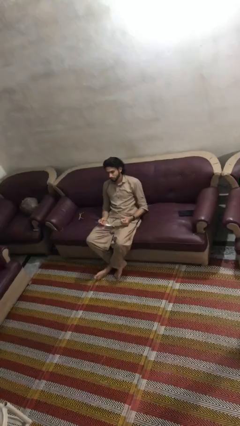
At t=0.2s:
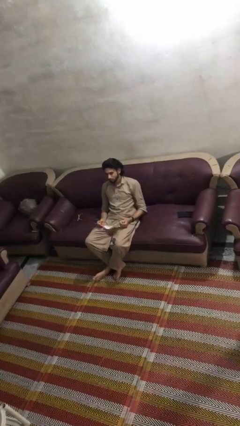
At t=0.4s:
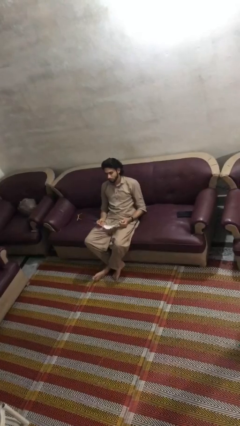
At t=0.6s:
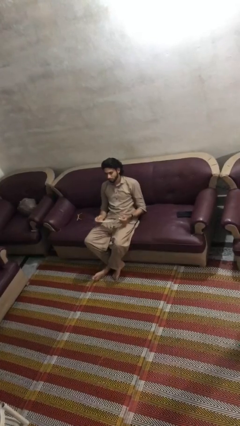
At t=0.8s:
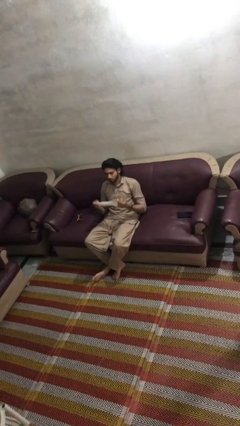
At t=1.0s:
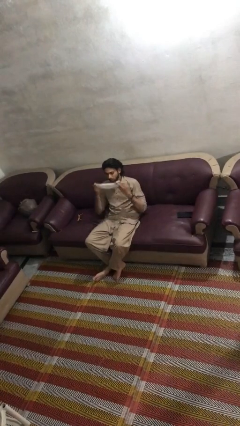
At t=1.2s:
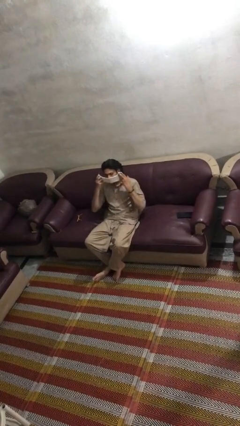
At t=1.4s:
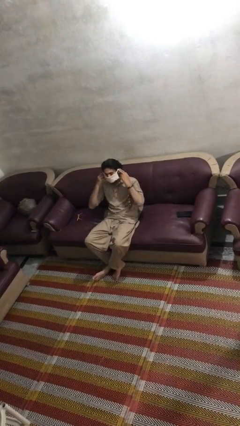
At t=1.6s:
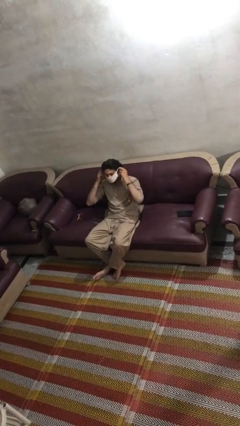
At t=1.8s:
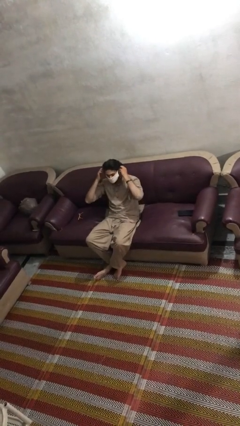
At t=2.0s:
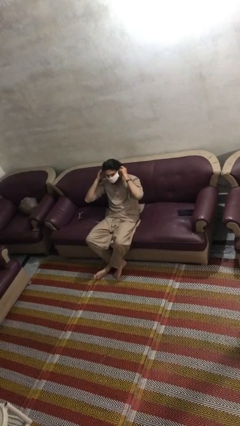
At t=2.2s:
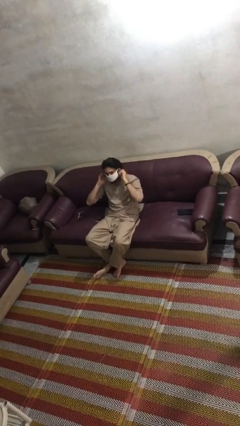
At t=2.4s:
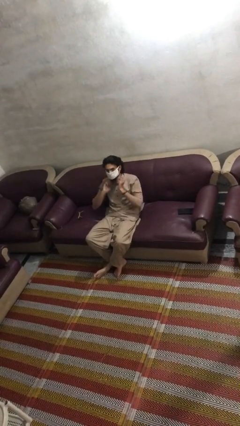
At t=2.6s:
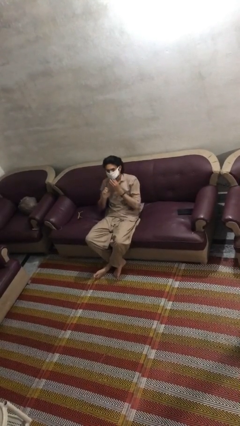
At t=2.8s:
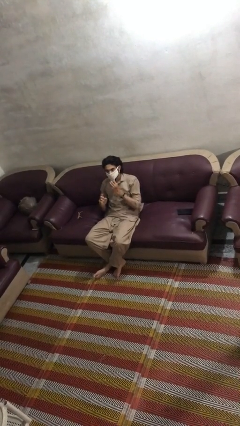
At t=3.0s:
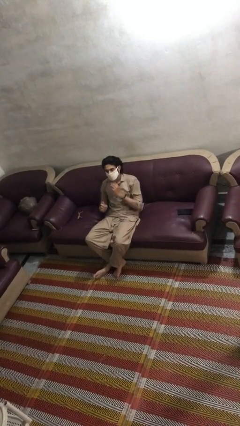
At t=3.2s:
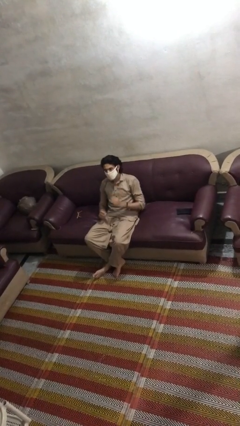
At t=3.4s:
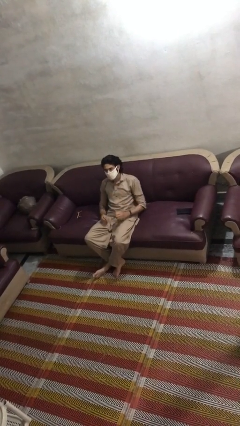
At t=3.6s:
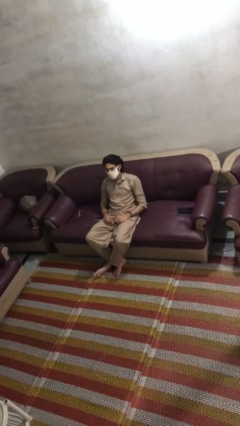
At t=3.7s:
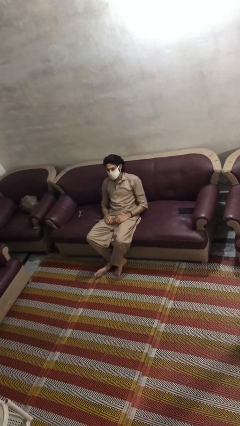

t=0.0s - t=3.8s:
person puts on facemask

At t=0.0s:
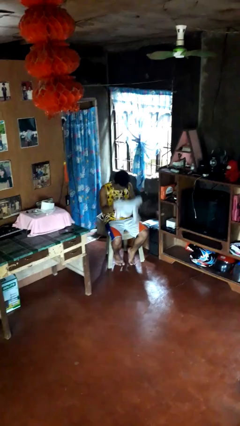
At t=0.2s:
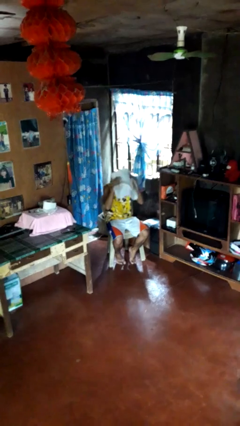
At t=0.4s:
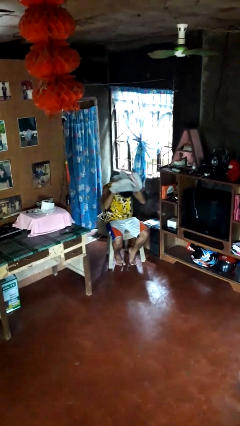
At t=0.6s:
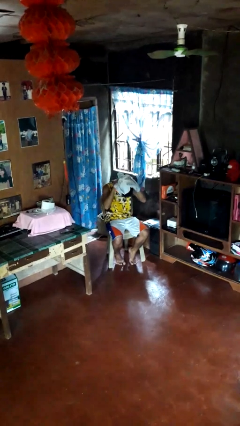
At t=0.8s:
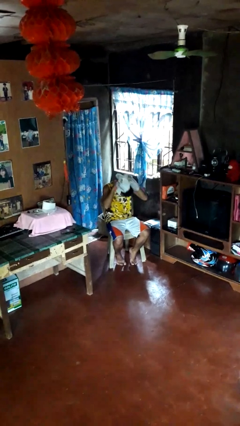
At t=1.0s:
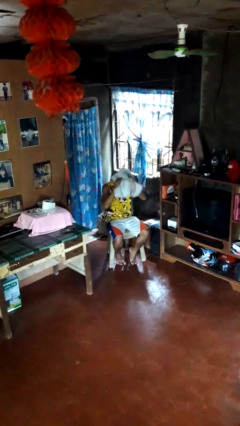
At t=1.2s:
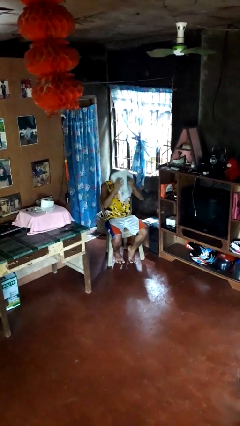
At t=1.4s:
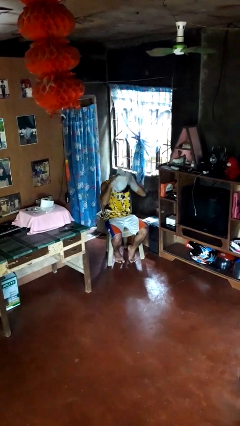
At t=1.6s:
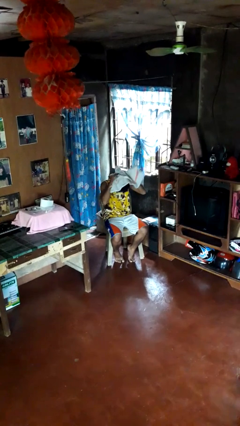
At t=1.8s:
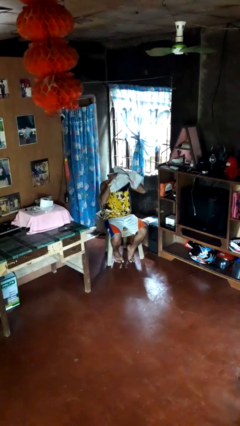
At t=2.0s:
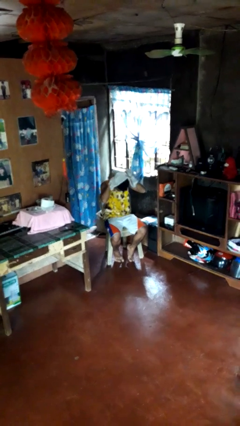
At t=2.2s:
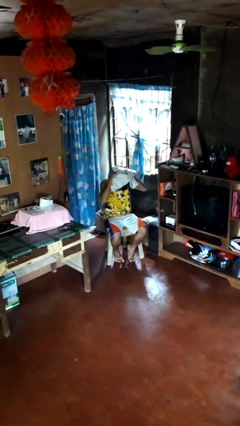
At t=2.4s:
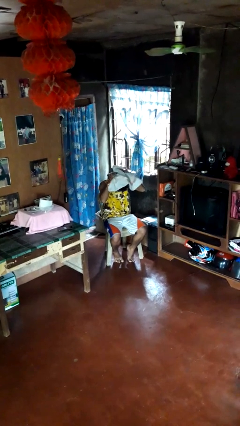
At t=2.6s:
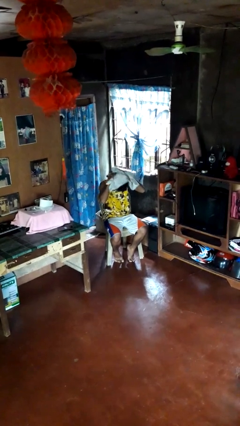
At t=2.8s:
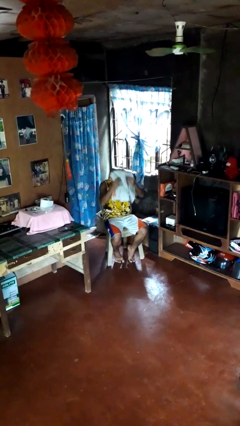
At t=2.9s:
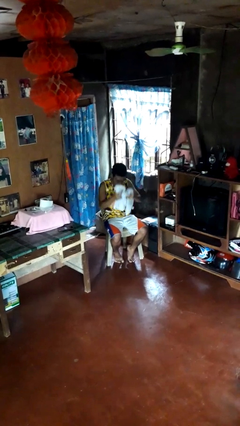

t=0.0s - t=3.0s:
person dries hair with towel

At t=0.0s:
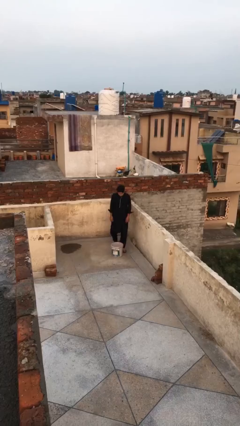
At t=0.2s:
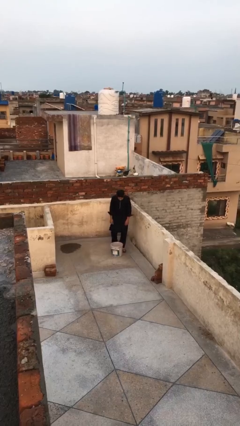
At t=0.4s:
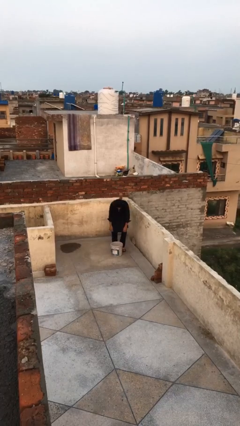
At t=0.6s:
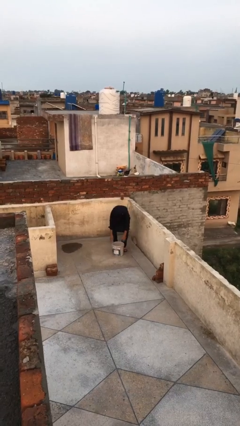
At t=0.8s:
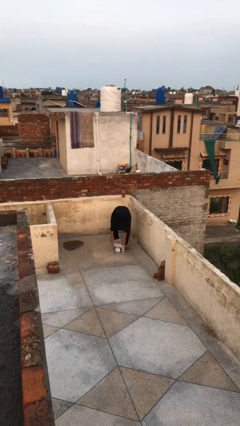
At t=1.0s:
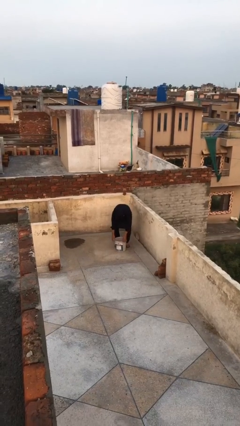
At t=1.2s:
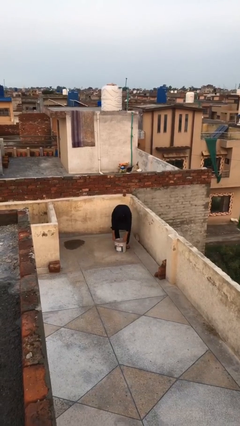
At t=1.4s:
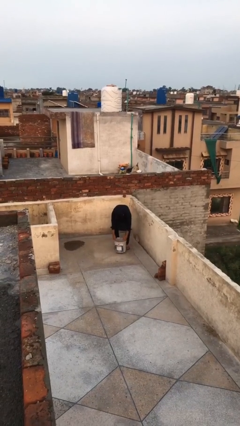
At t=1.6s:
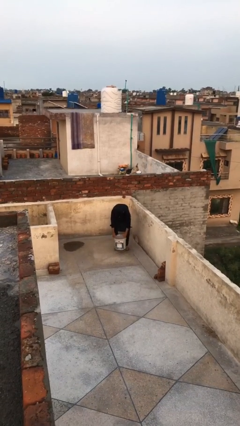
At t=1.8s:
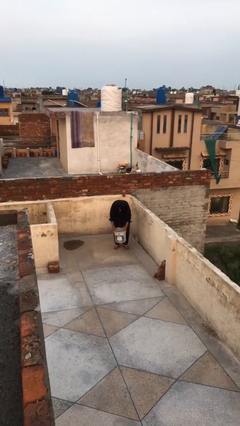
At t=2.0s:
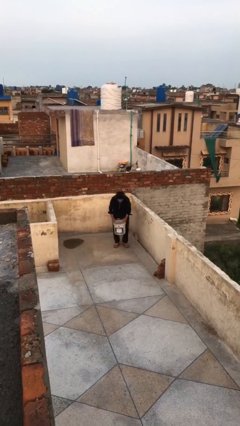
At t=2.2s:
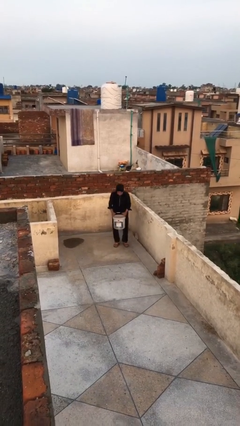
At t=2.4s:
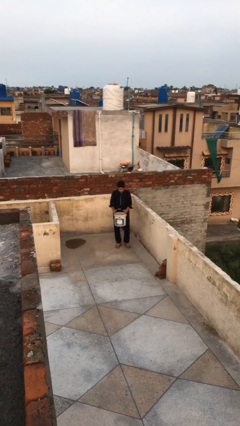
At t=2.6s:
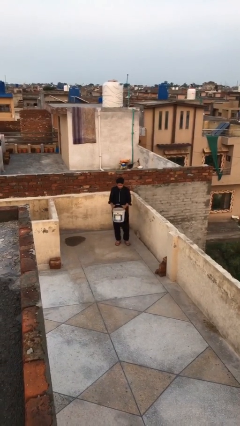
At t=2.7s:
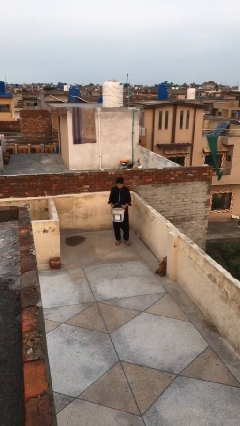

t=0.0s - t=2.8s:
person picks up object from floor

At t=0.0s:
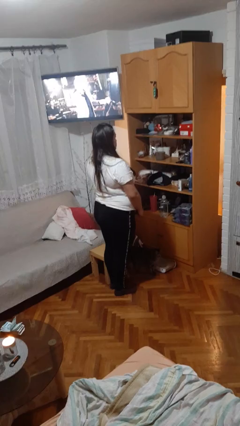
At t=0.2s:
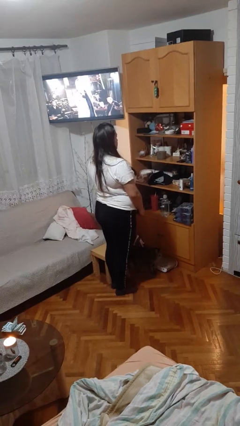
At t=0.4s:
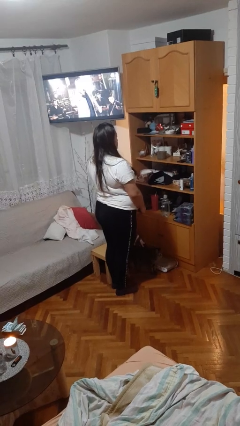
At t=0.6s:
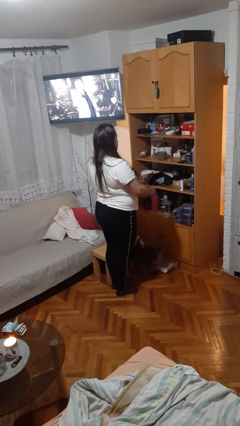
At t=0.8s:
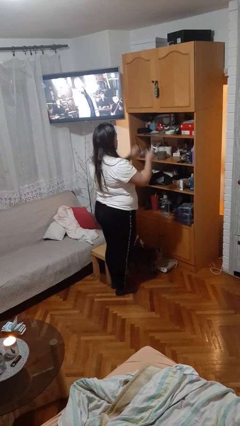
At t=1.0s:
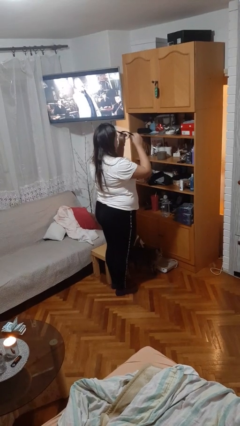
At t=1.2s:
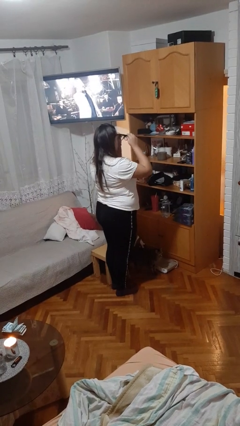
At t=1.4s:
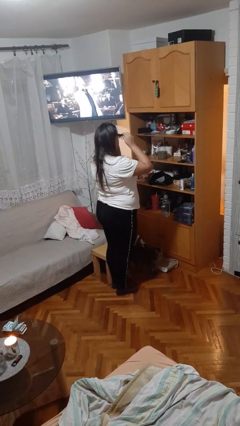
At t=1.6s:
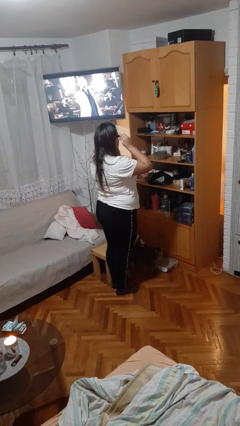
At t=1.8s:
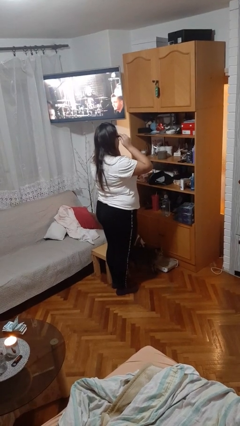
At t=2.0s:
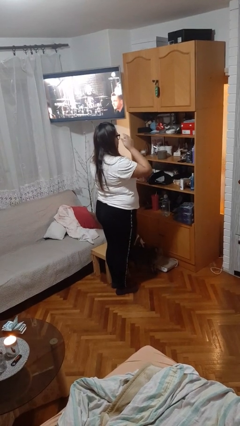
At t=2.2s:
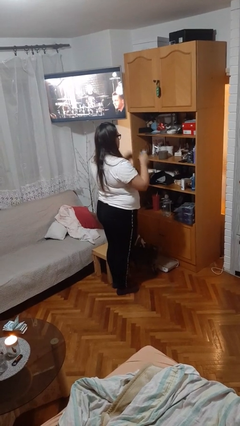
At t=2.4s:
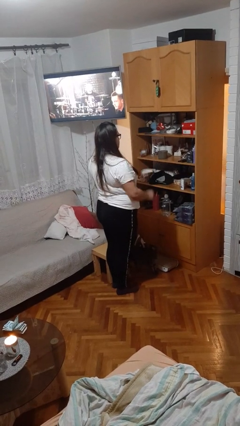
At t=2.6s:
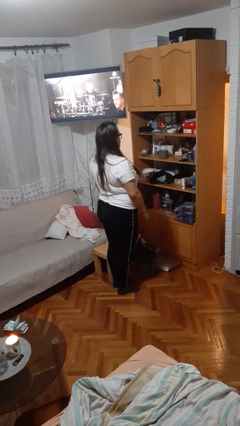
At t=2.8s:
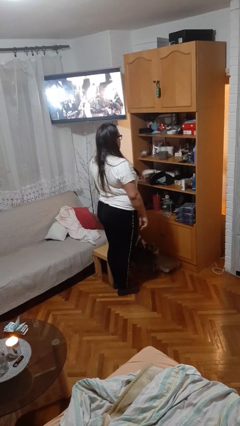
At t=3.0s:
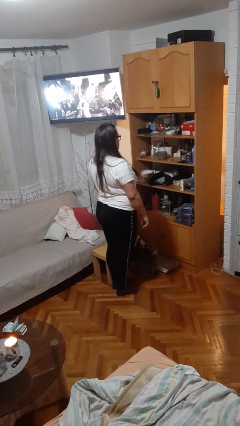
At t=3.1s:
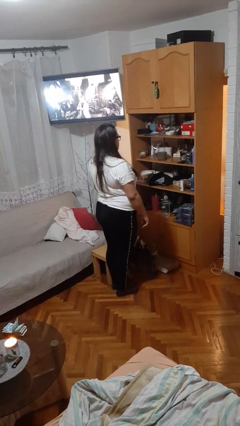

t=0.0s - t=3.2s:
person puts on glasses

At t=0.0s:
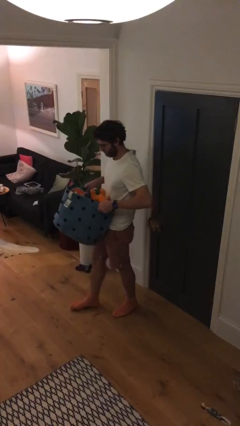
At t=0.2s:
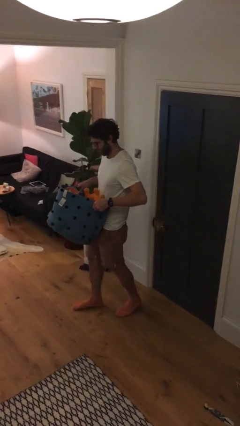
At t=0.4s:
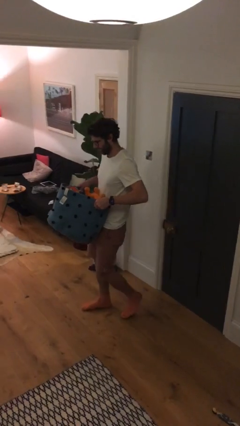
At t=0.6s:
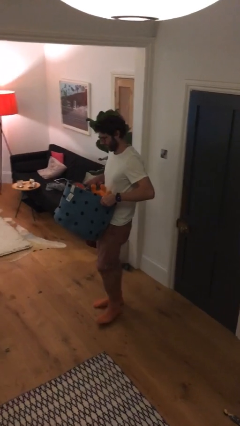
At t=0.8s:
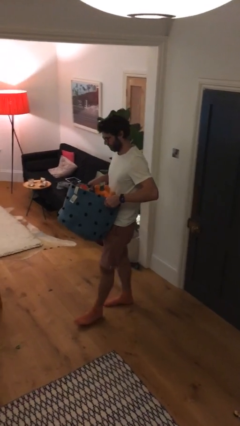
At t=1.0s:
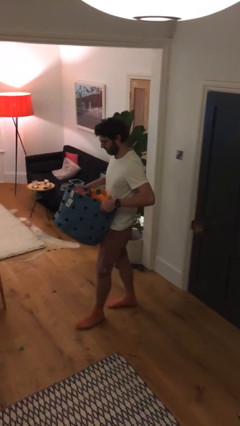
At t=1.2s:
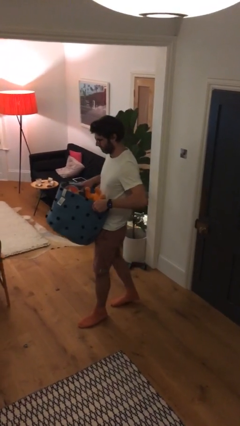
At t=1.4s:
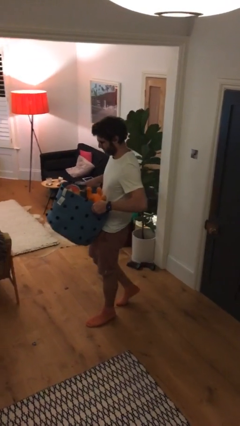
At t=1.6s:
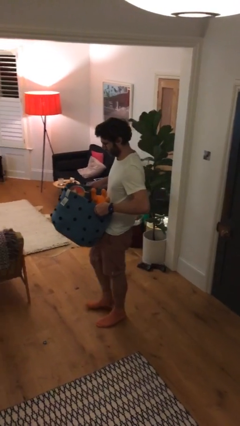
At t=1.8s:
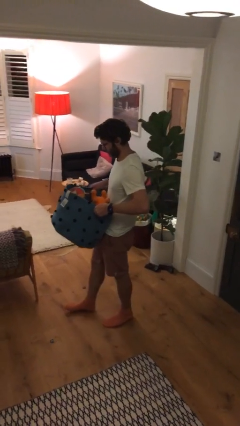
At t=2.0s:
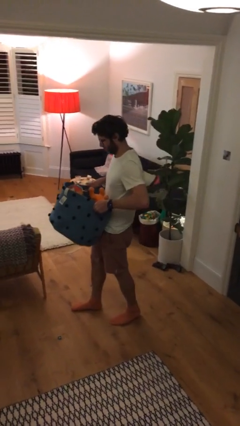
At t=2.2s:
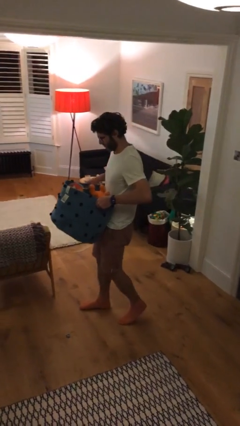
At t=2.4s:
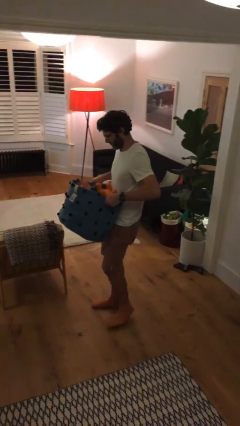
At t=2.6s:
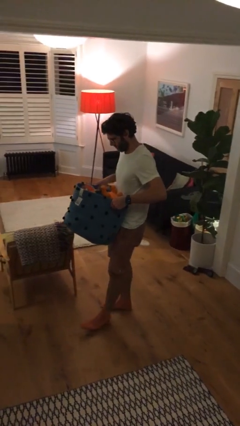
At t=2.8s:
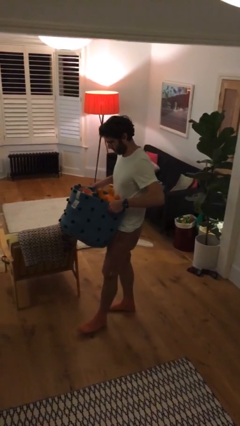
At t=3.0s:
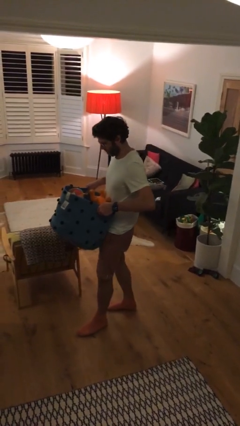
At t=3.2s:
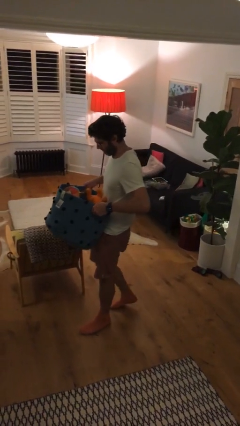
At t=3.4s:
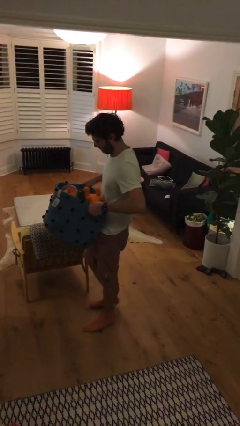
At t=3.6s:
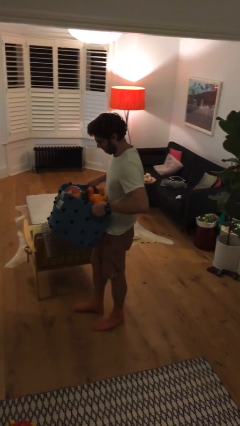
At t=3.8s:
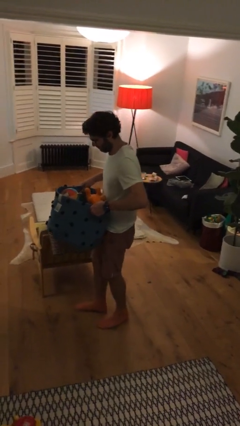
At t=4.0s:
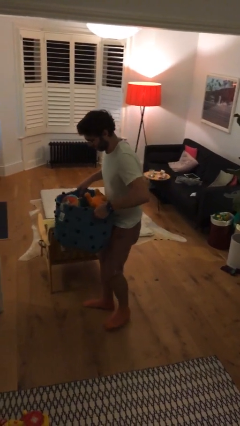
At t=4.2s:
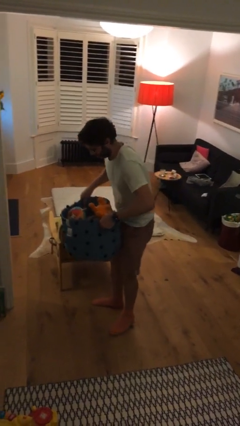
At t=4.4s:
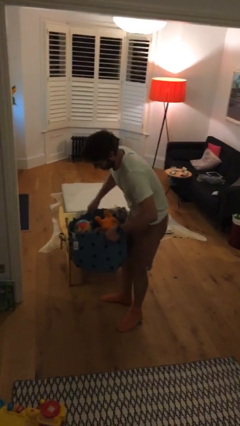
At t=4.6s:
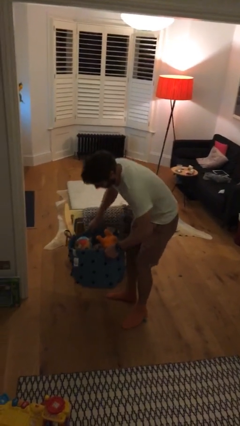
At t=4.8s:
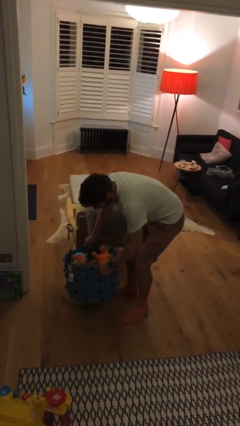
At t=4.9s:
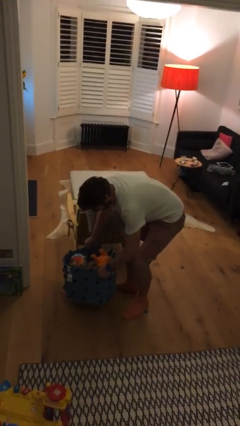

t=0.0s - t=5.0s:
person carries heavy object
